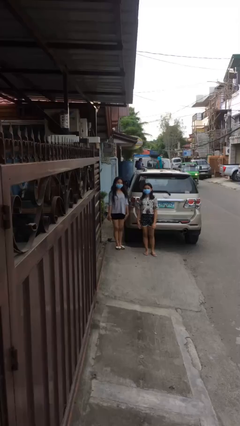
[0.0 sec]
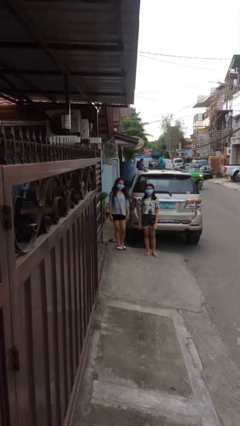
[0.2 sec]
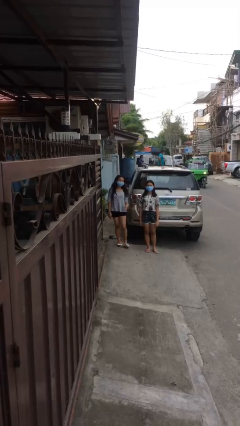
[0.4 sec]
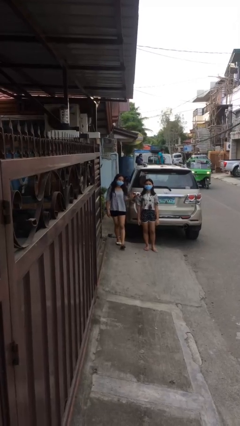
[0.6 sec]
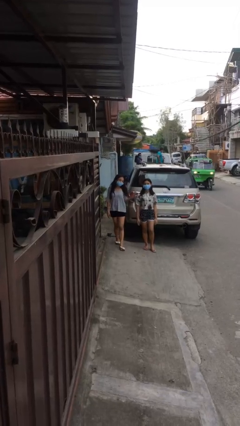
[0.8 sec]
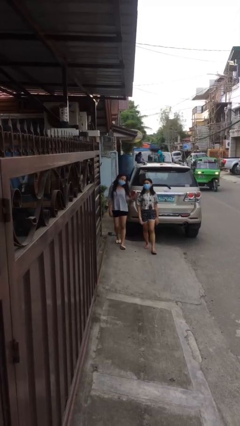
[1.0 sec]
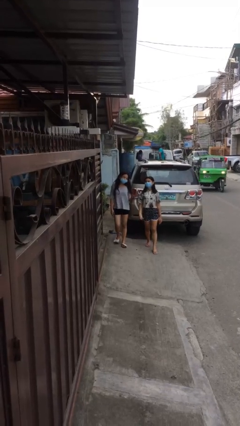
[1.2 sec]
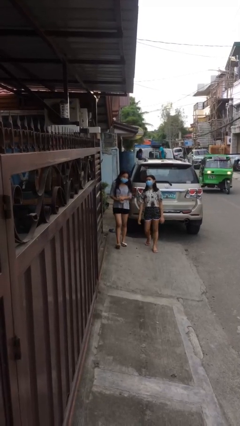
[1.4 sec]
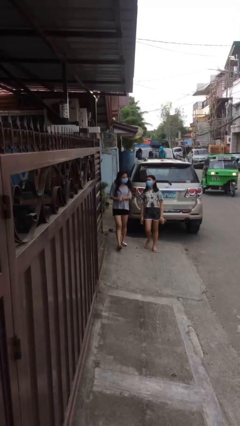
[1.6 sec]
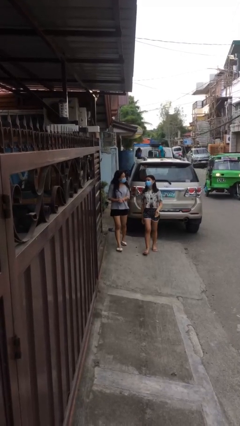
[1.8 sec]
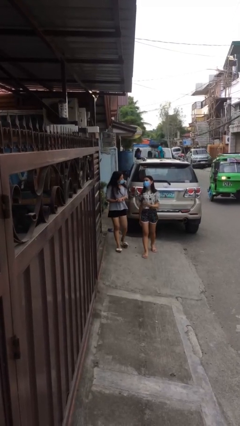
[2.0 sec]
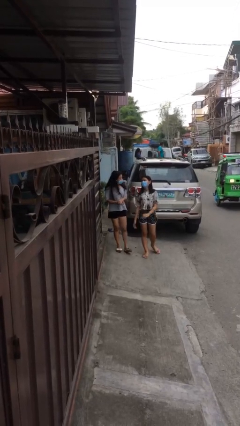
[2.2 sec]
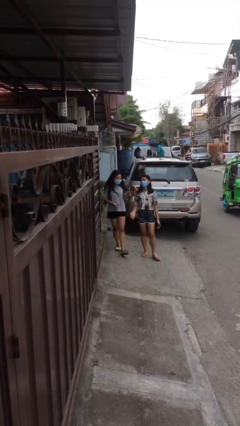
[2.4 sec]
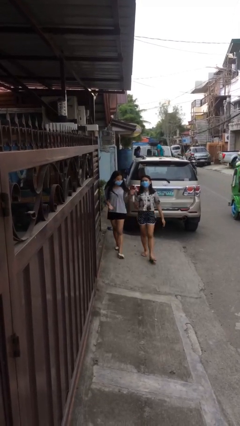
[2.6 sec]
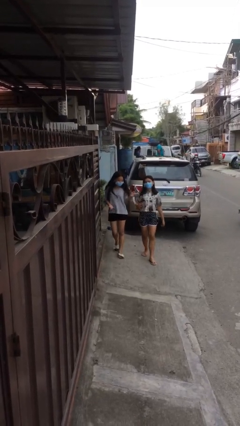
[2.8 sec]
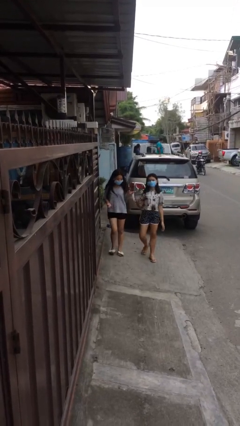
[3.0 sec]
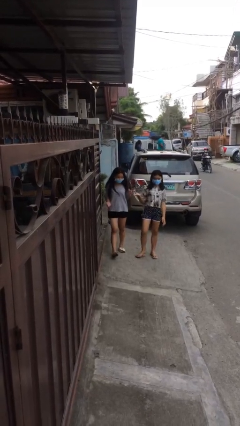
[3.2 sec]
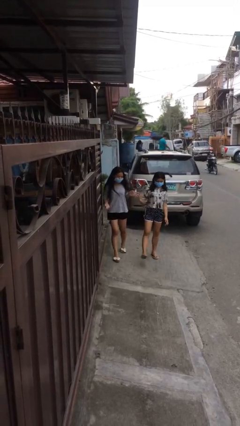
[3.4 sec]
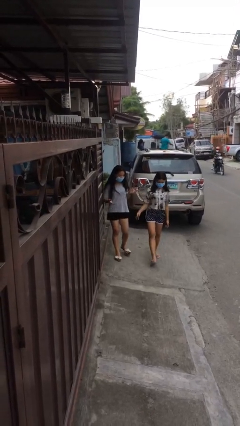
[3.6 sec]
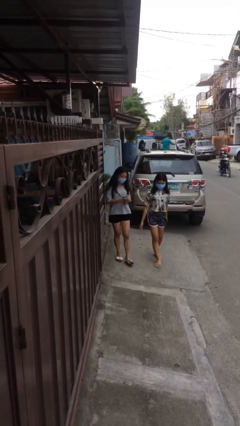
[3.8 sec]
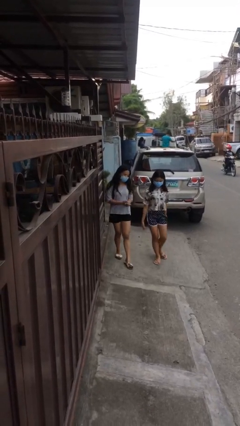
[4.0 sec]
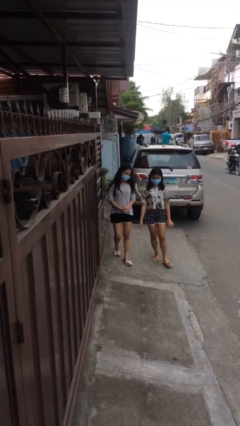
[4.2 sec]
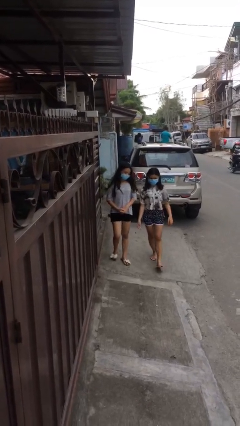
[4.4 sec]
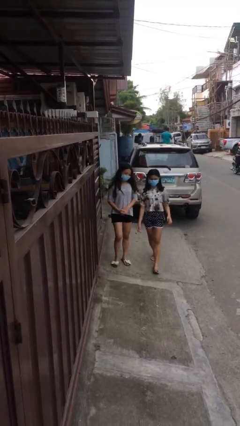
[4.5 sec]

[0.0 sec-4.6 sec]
person talks to person

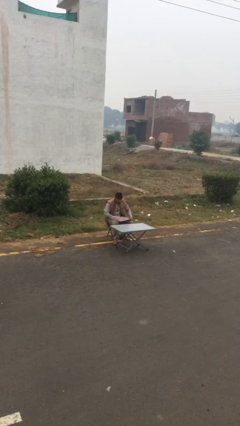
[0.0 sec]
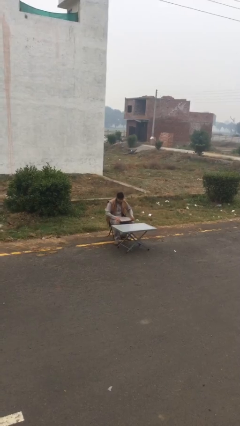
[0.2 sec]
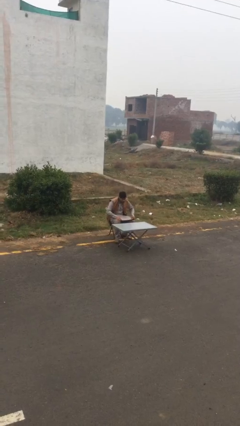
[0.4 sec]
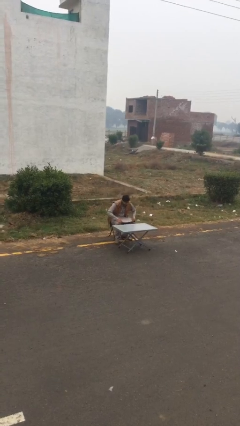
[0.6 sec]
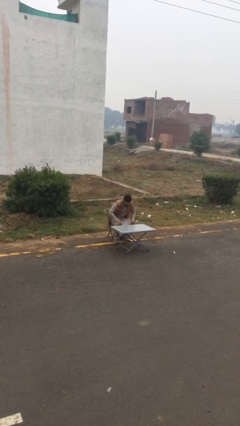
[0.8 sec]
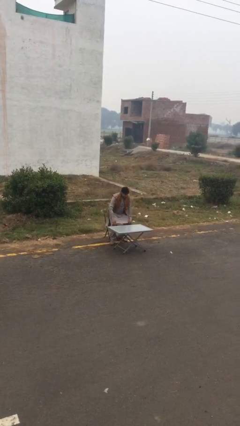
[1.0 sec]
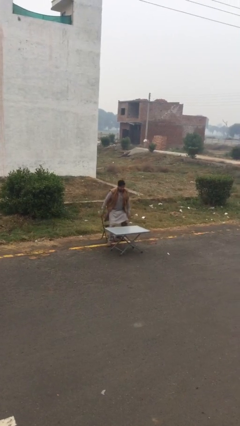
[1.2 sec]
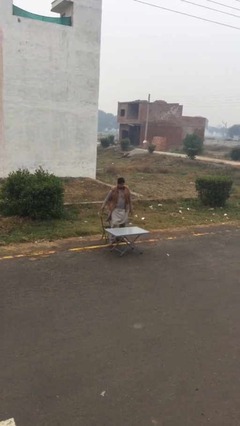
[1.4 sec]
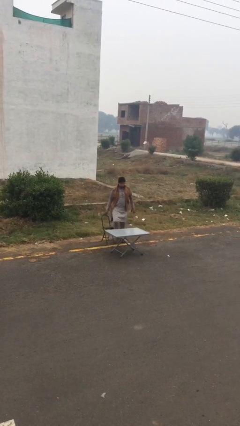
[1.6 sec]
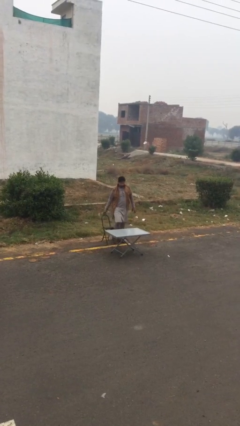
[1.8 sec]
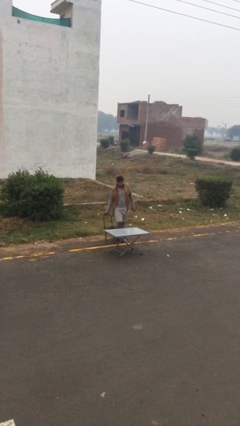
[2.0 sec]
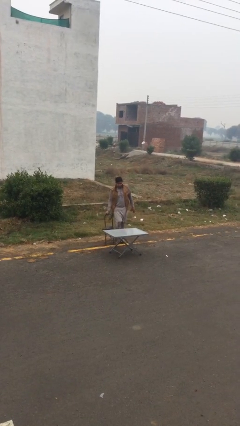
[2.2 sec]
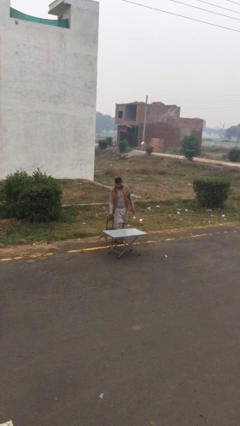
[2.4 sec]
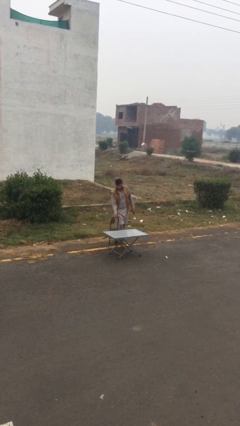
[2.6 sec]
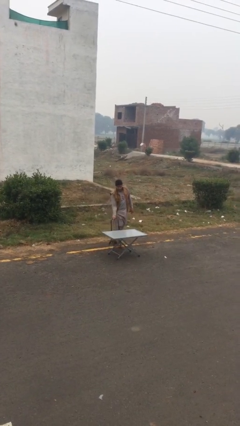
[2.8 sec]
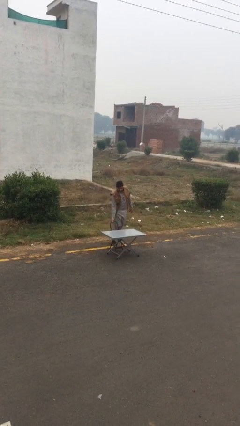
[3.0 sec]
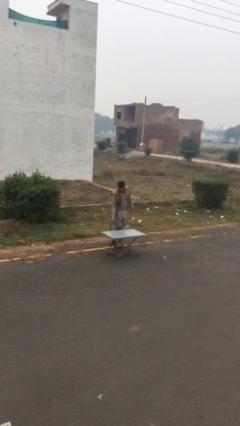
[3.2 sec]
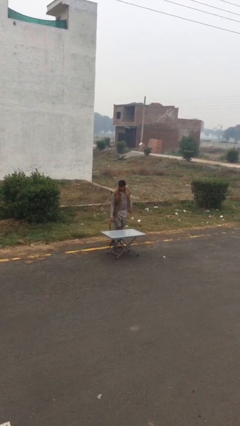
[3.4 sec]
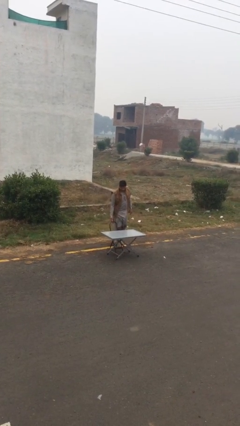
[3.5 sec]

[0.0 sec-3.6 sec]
person stands up

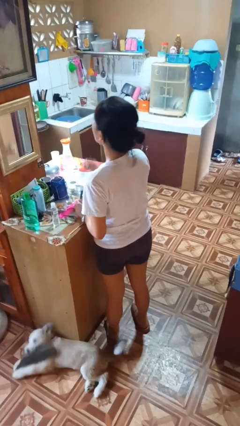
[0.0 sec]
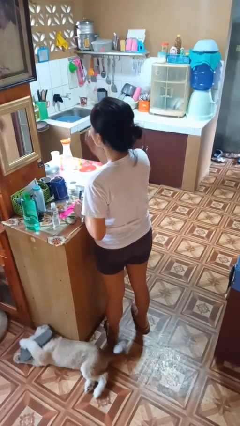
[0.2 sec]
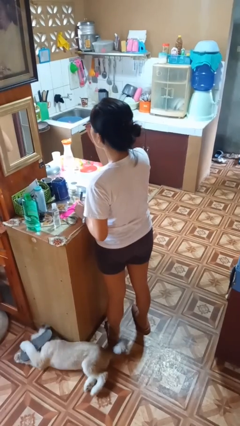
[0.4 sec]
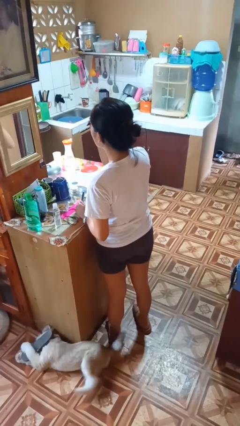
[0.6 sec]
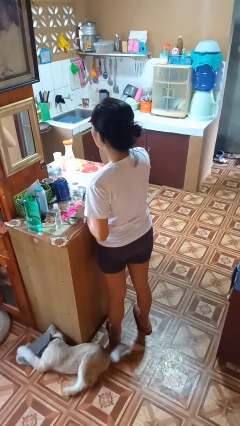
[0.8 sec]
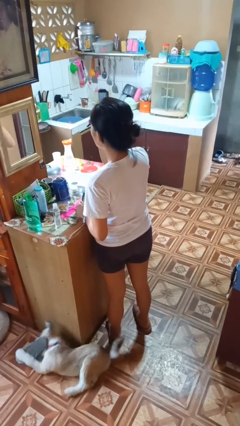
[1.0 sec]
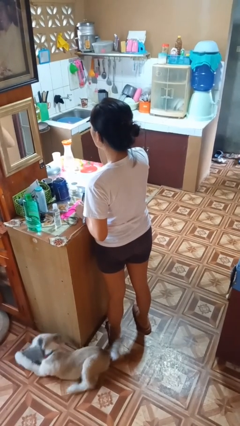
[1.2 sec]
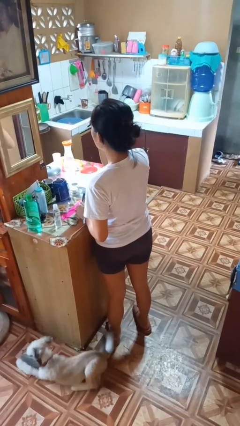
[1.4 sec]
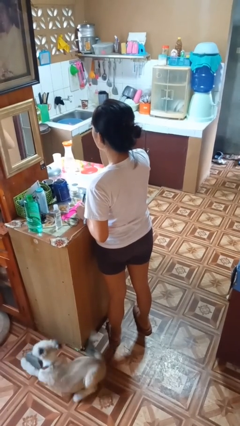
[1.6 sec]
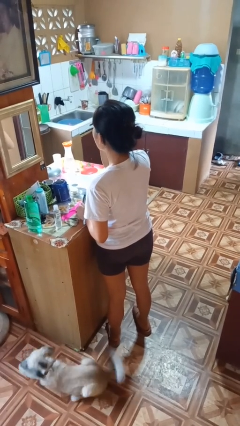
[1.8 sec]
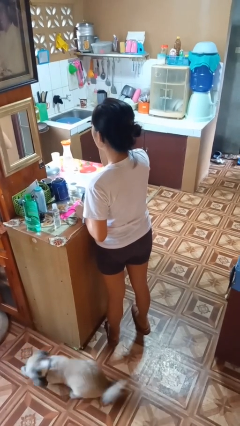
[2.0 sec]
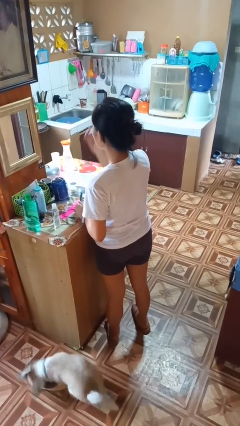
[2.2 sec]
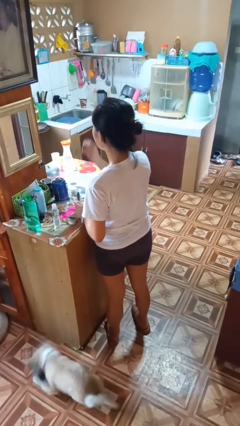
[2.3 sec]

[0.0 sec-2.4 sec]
person applies eye makeup

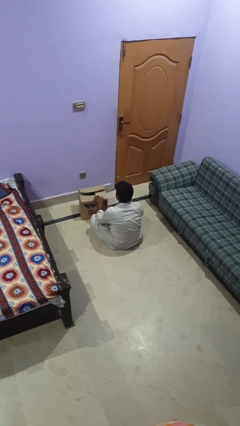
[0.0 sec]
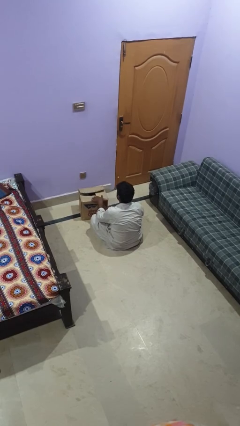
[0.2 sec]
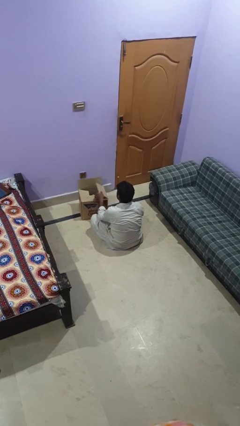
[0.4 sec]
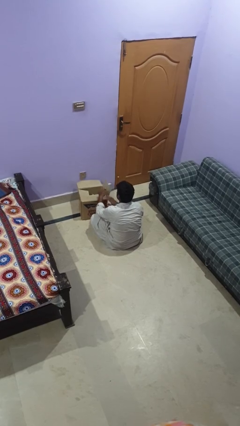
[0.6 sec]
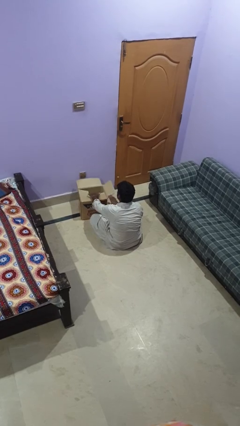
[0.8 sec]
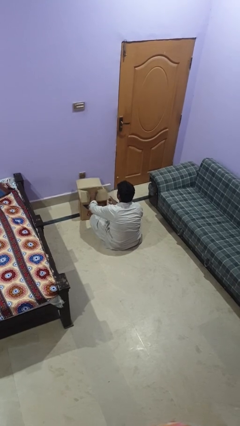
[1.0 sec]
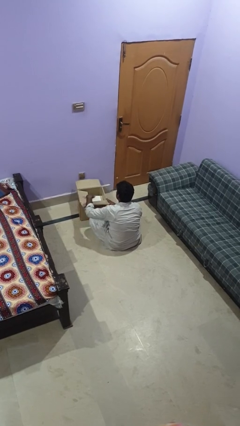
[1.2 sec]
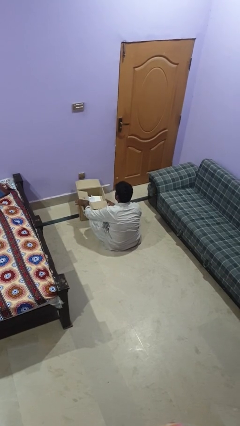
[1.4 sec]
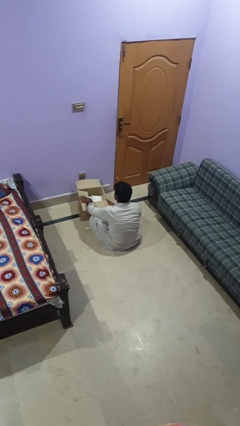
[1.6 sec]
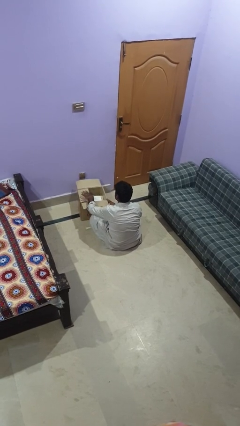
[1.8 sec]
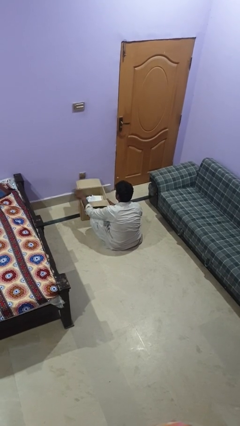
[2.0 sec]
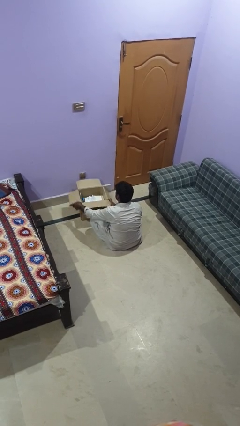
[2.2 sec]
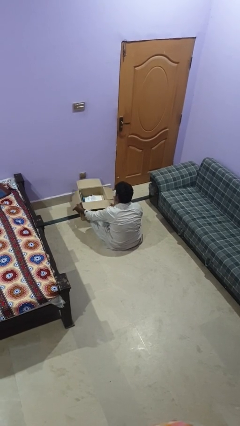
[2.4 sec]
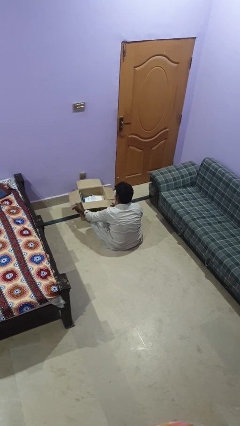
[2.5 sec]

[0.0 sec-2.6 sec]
person opens box

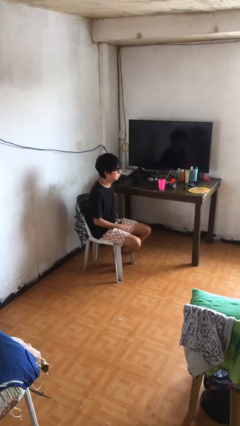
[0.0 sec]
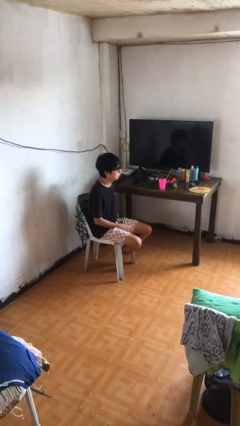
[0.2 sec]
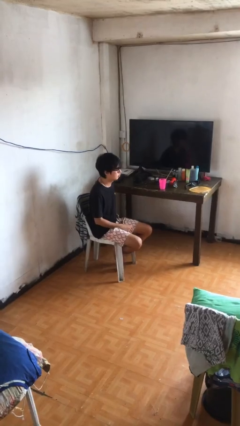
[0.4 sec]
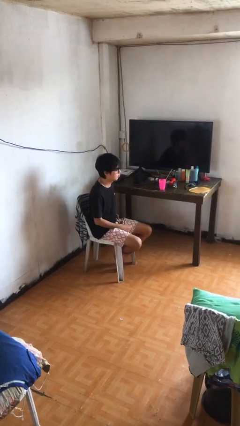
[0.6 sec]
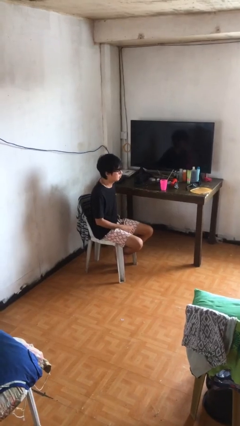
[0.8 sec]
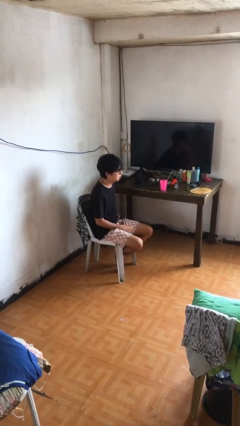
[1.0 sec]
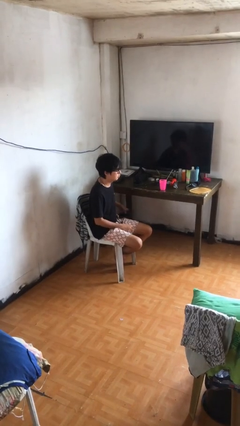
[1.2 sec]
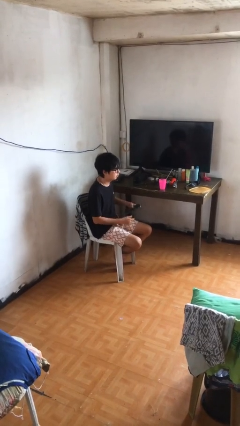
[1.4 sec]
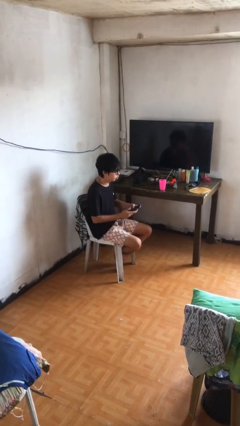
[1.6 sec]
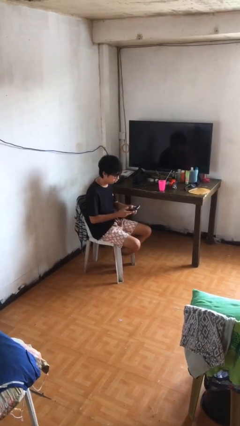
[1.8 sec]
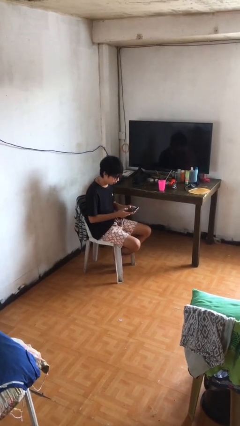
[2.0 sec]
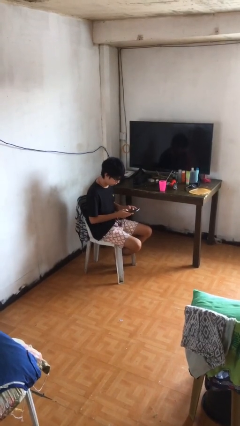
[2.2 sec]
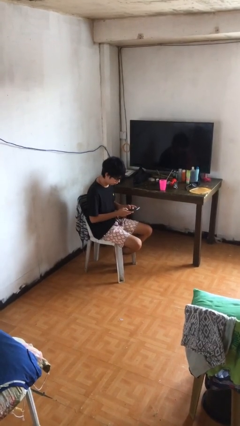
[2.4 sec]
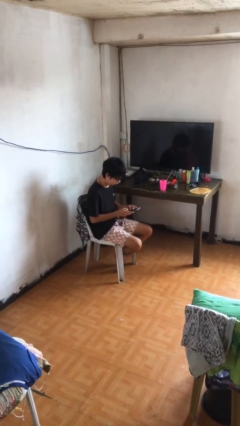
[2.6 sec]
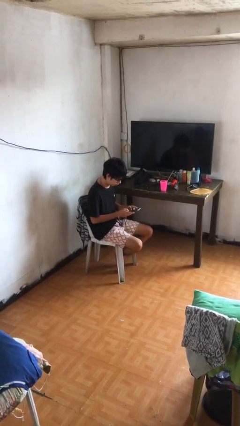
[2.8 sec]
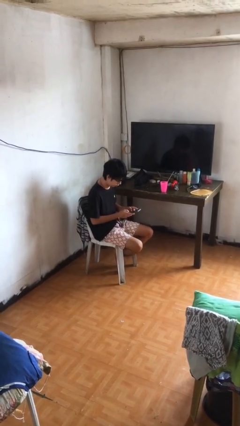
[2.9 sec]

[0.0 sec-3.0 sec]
person takes phone from pocket

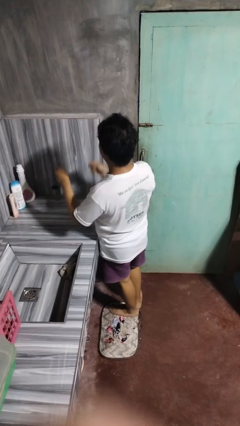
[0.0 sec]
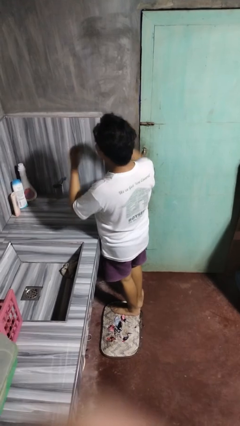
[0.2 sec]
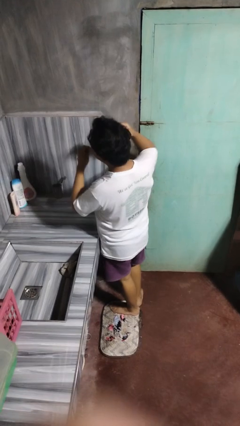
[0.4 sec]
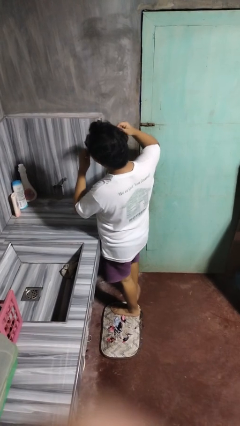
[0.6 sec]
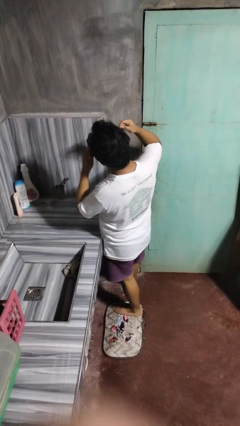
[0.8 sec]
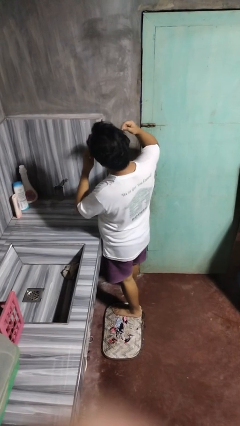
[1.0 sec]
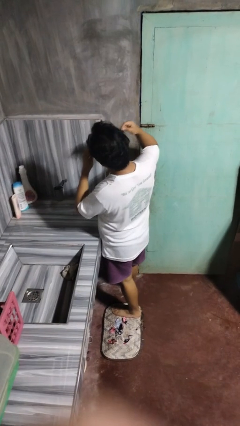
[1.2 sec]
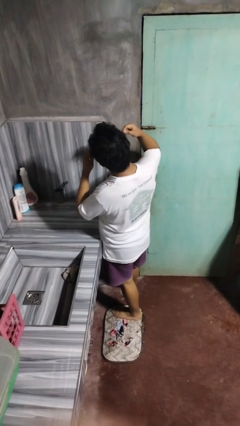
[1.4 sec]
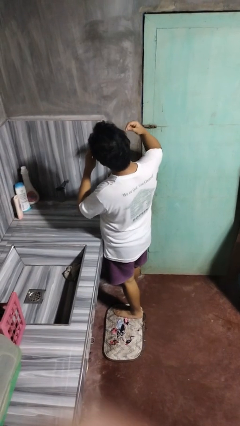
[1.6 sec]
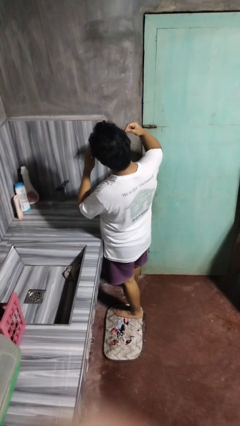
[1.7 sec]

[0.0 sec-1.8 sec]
person flosses
